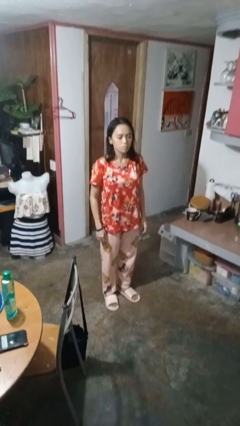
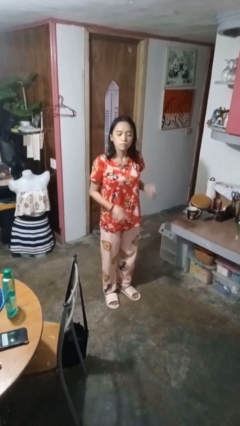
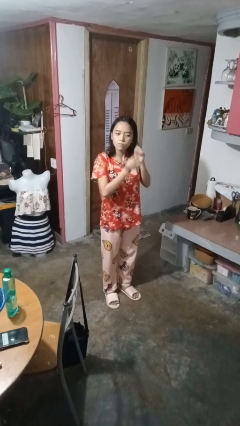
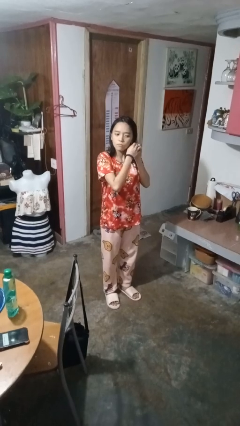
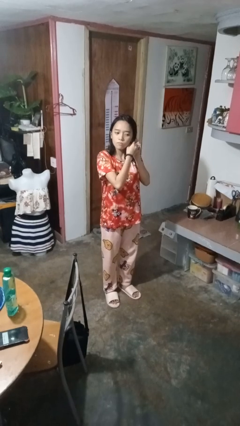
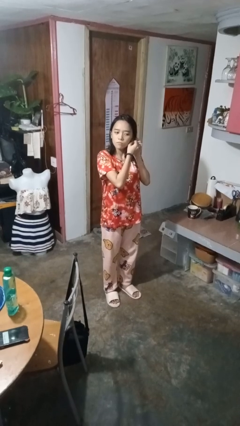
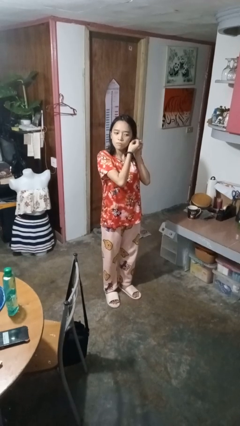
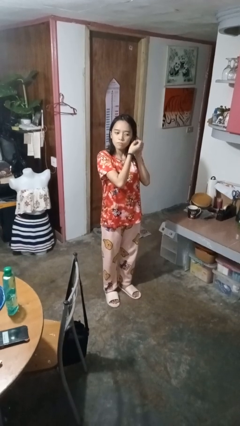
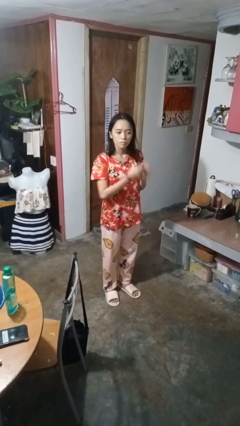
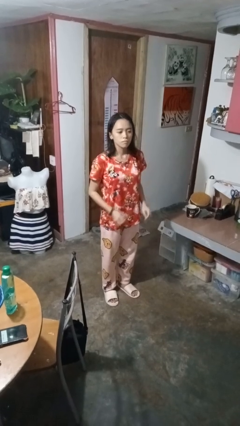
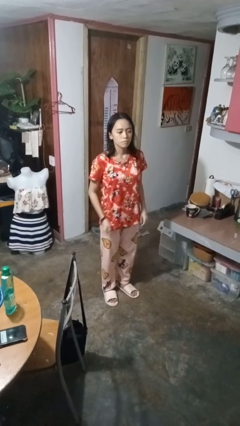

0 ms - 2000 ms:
person takes off earrings

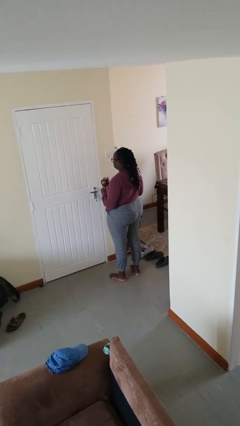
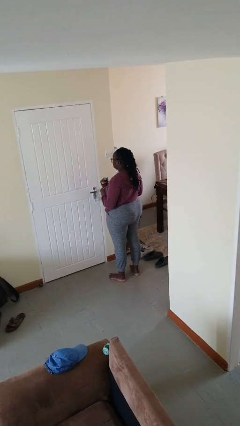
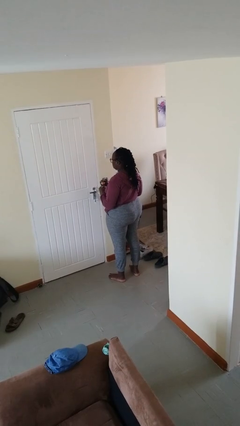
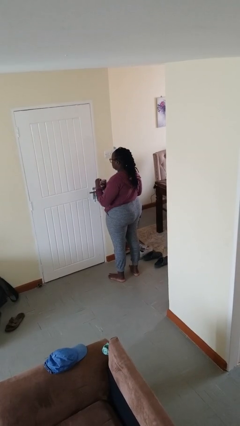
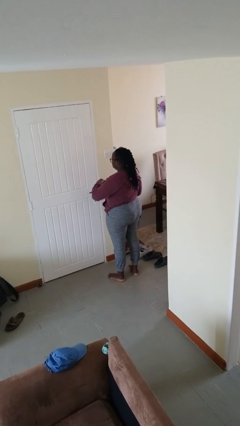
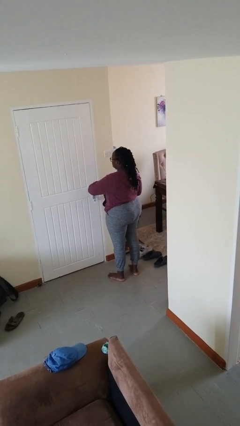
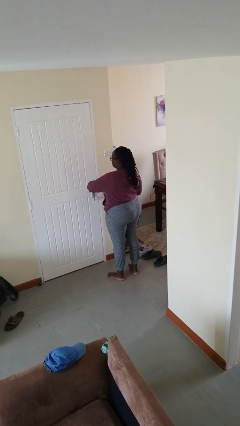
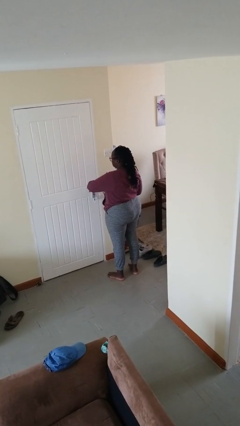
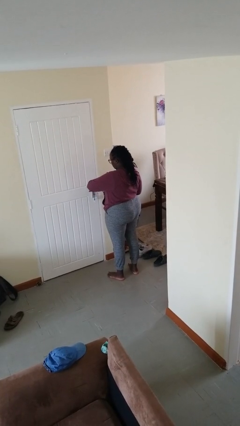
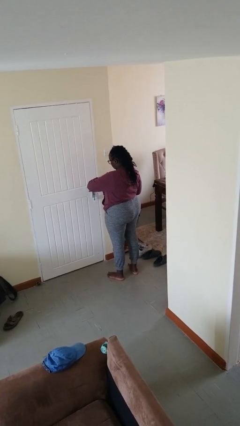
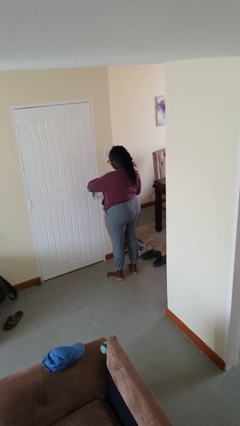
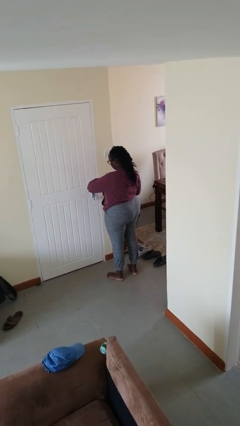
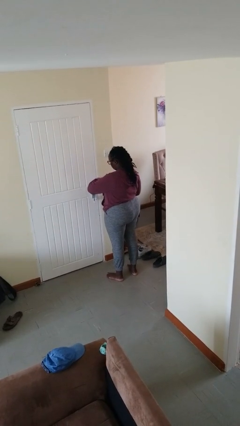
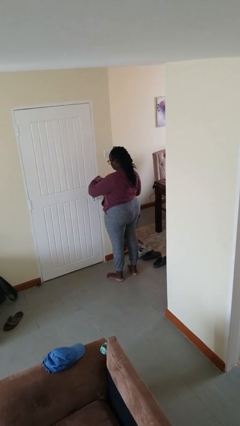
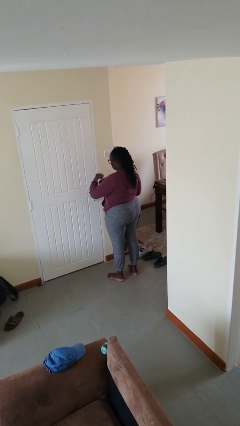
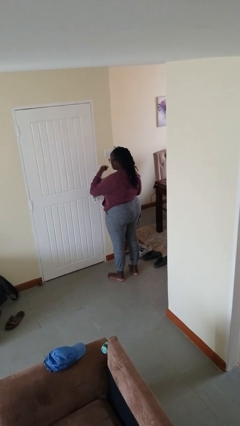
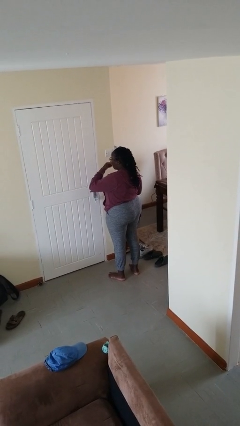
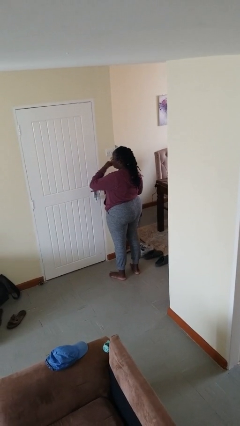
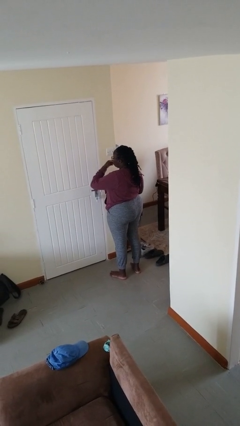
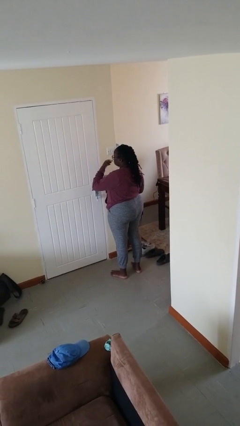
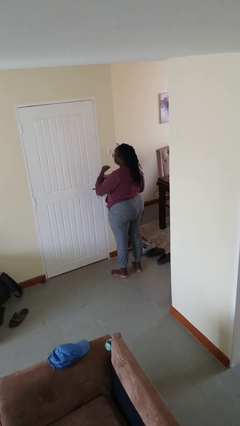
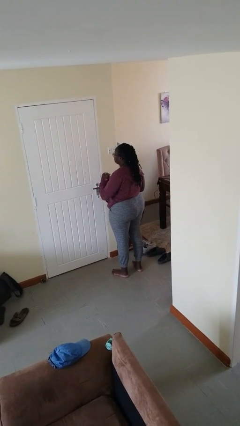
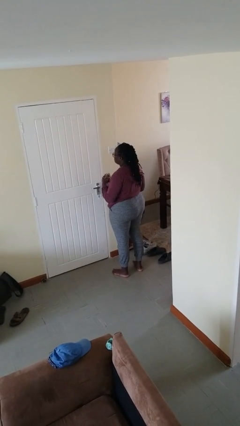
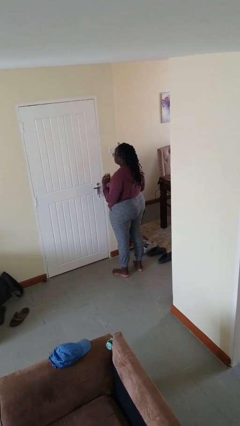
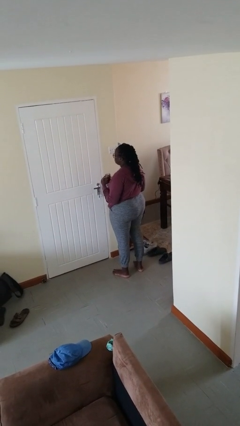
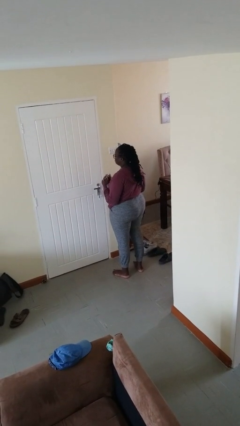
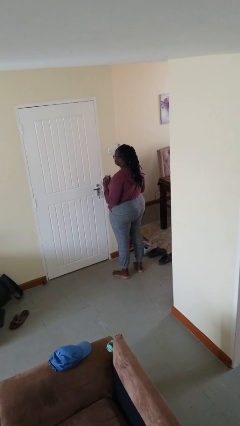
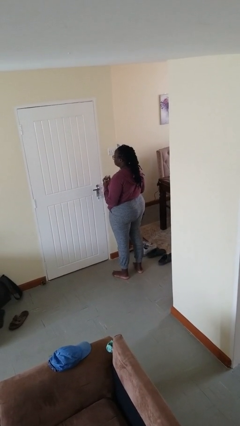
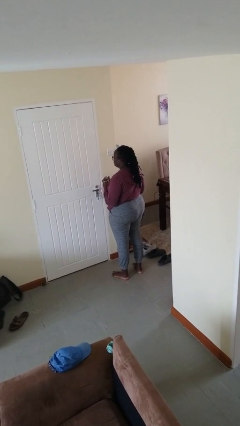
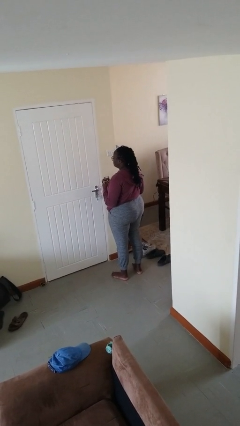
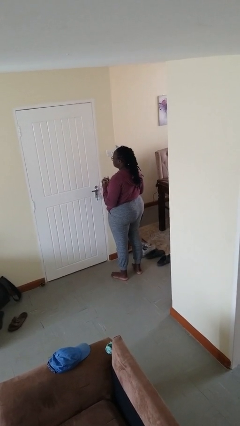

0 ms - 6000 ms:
person eats snack from bag

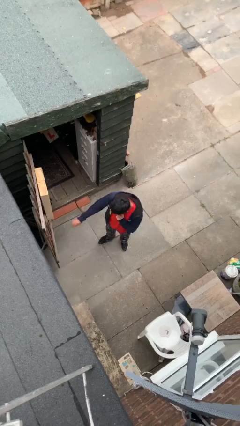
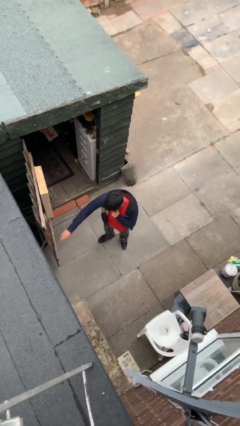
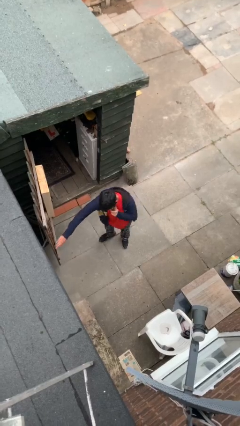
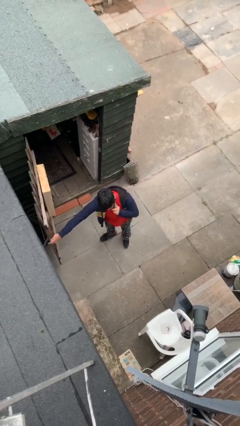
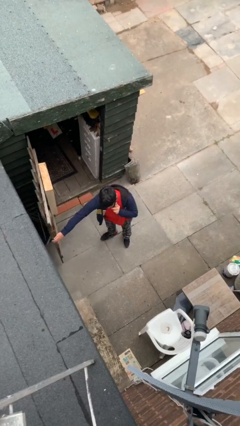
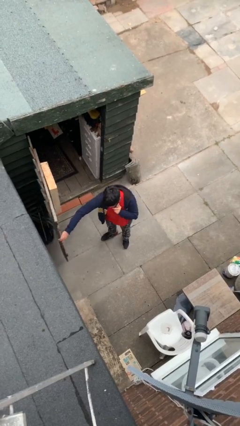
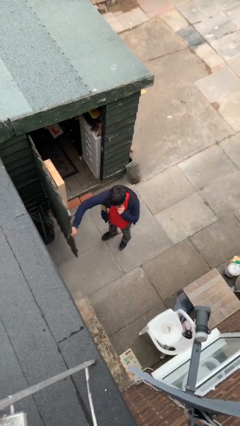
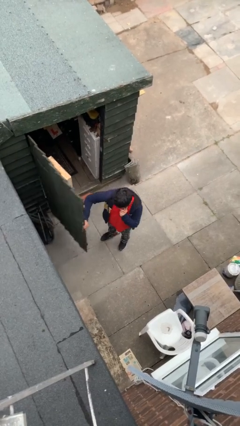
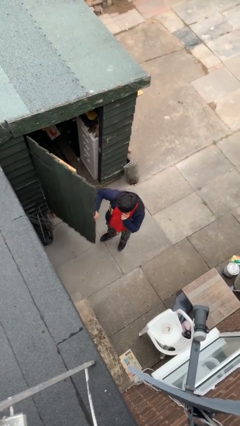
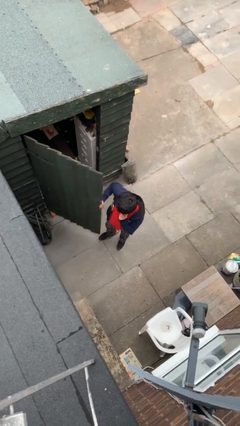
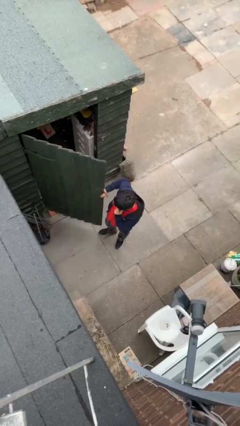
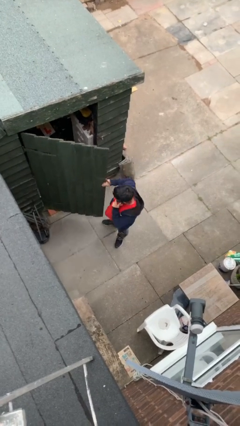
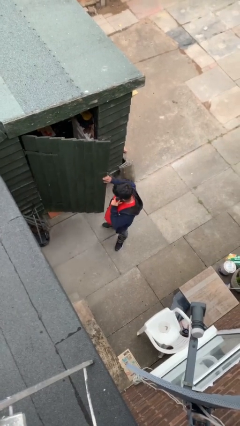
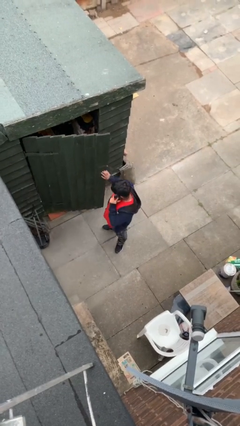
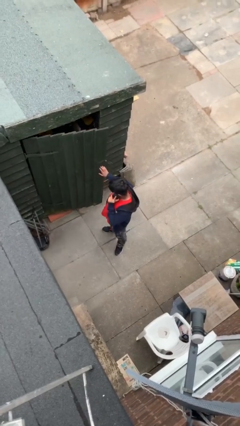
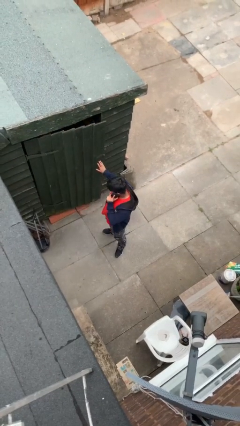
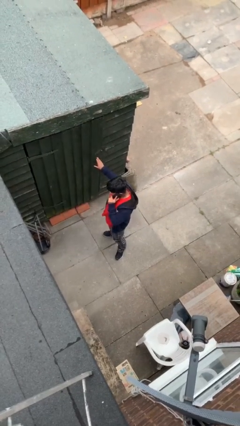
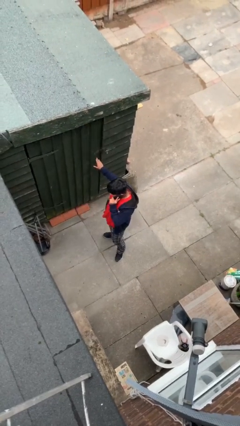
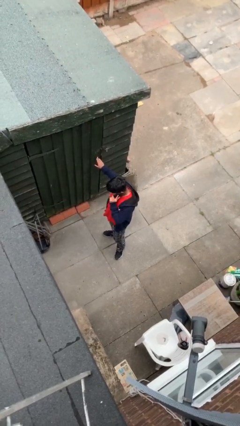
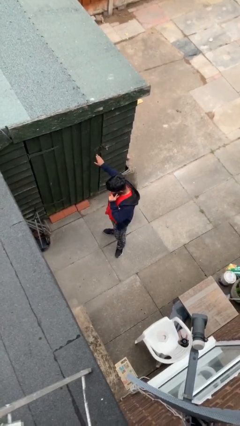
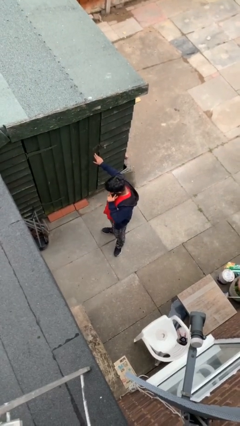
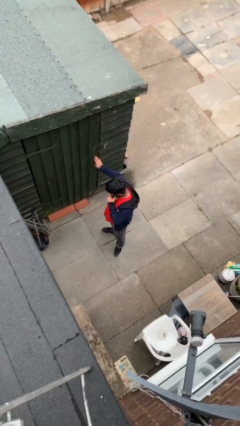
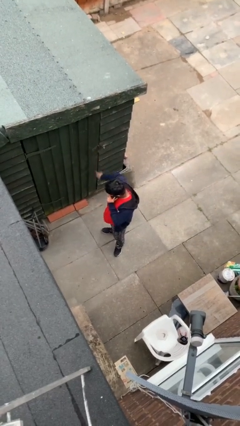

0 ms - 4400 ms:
person closes facility door

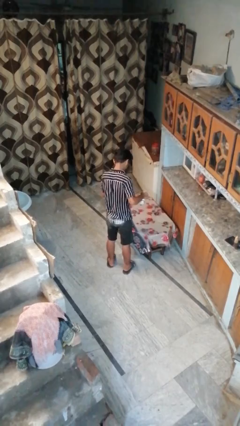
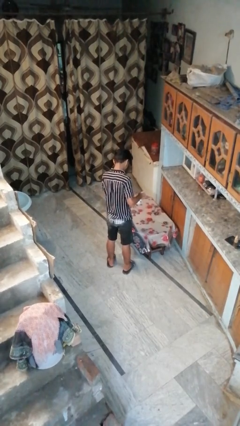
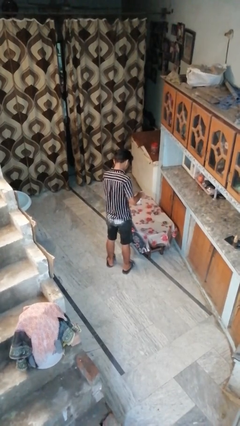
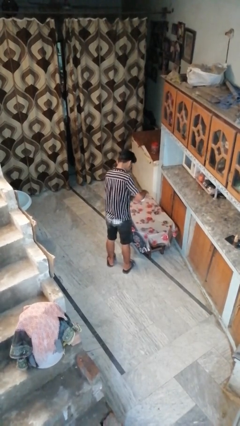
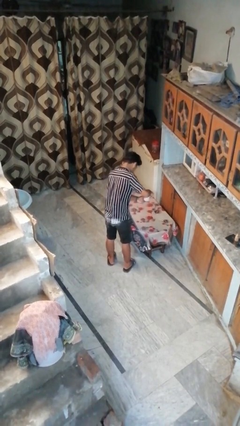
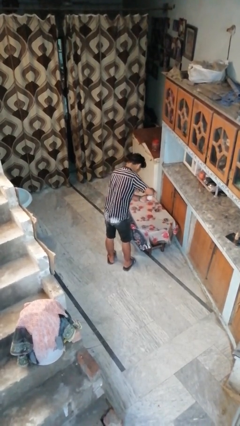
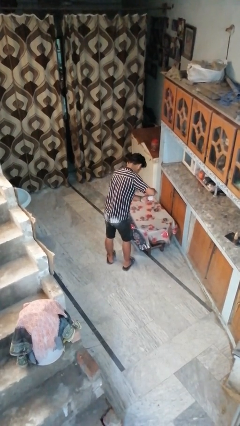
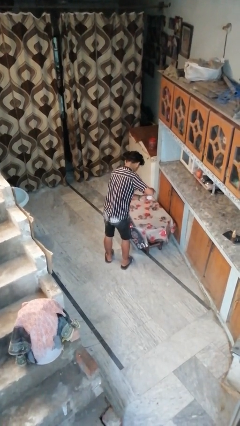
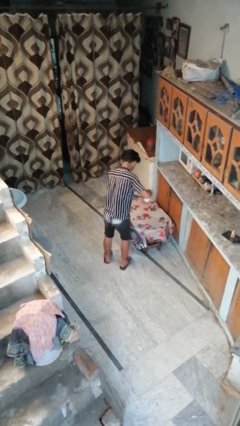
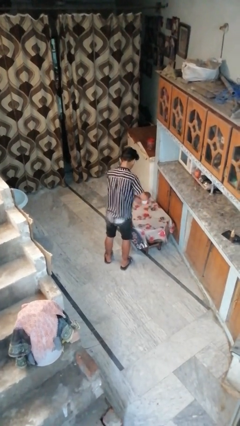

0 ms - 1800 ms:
person sprays from bottle

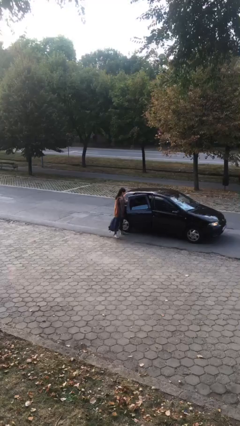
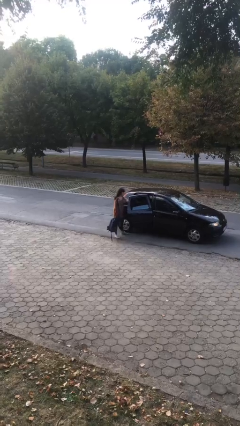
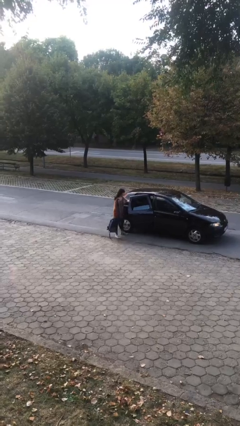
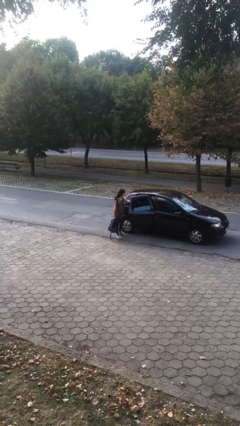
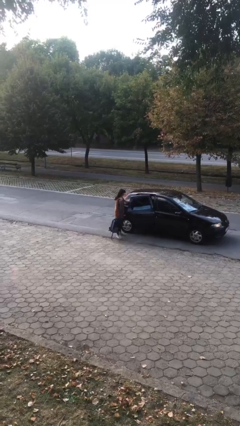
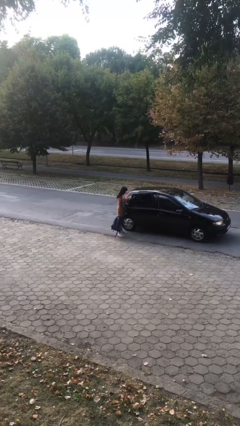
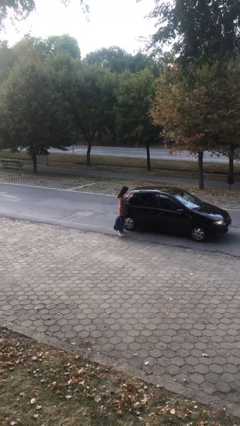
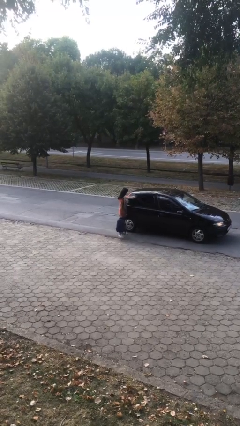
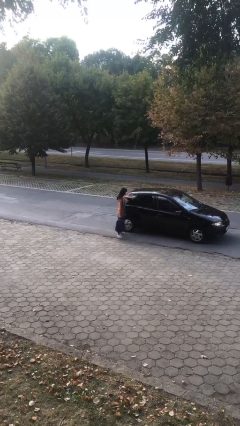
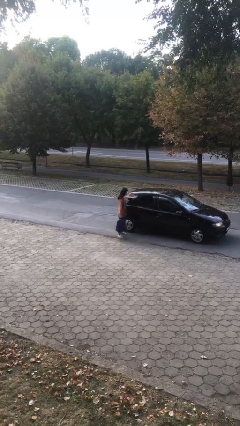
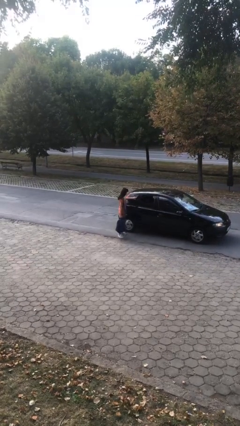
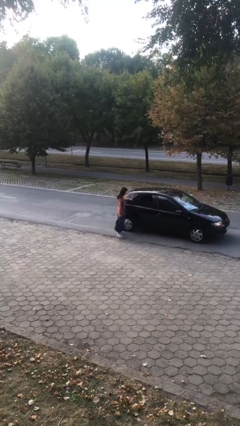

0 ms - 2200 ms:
person closes car door

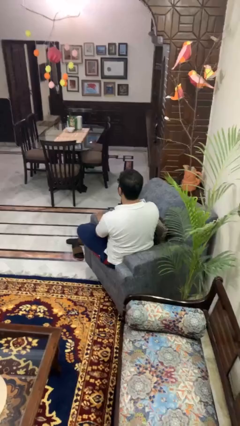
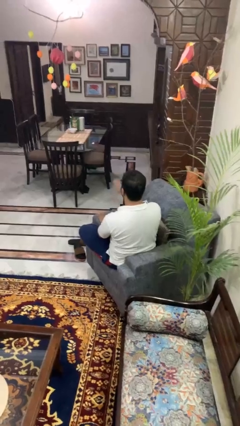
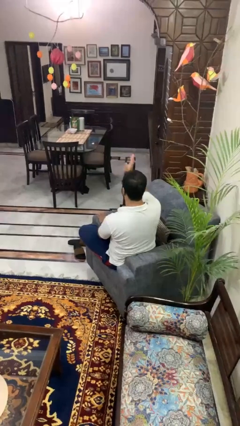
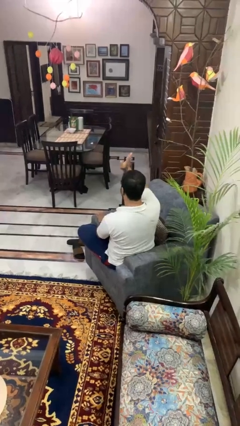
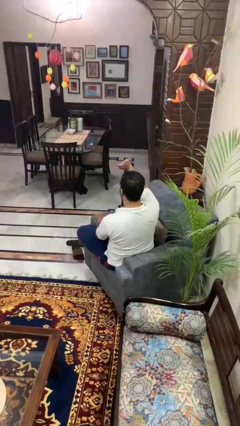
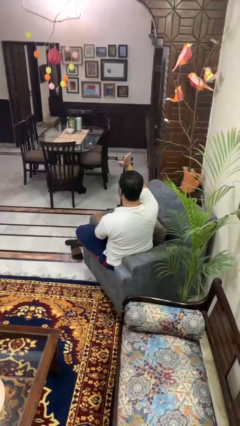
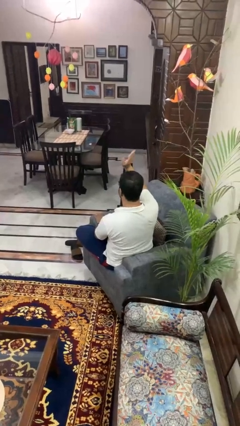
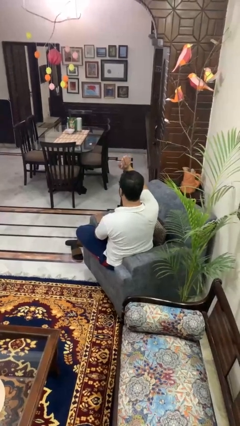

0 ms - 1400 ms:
person waves at person
